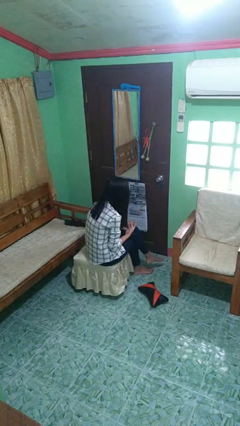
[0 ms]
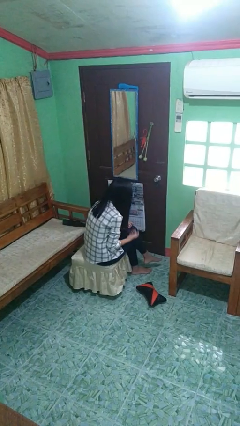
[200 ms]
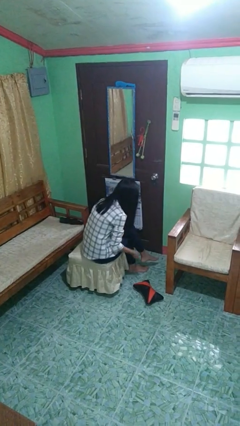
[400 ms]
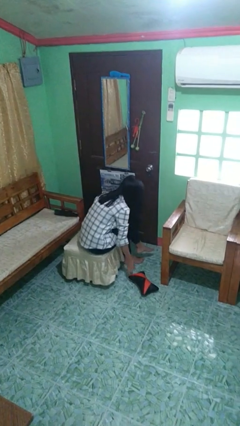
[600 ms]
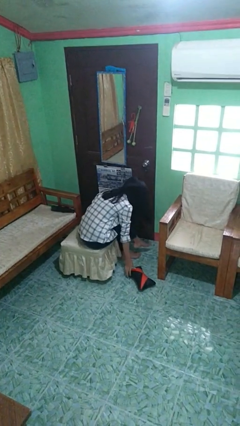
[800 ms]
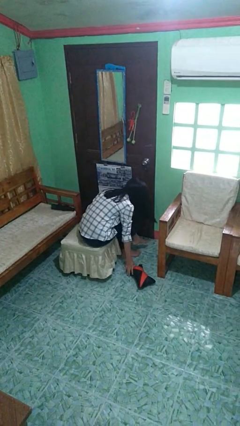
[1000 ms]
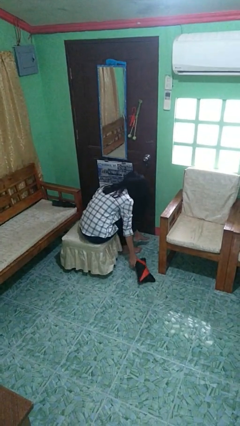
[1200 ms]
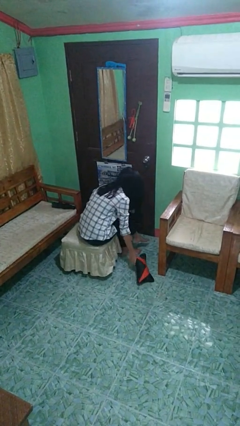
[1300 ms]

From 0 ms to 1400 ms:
person picks up object from floor

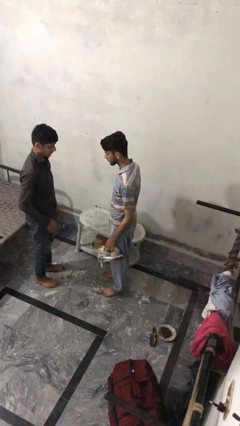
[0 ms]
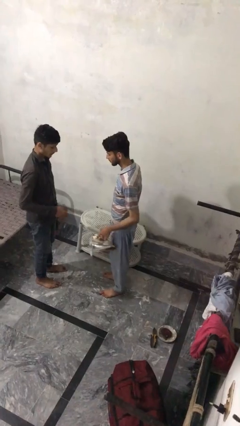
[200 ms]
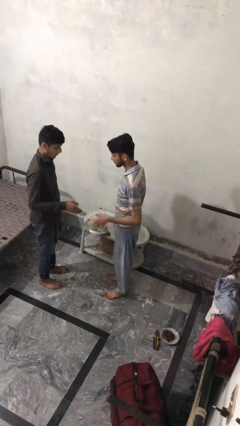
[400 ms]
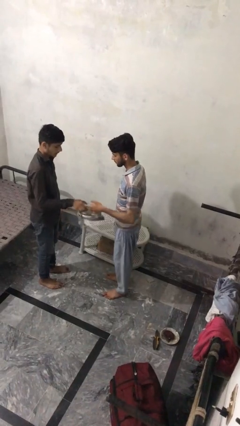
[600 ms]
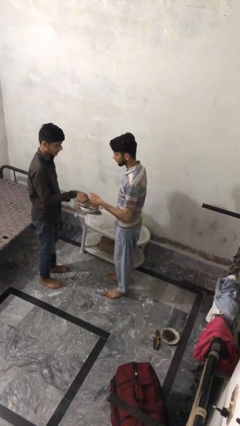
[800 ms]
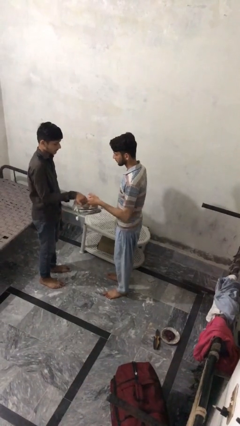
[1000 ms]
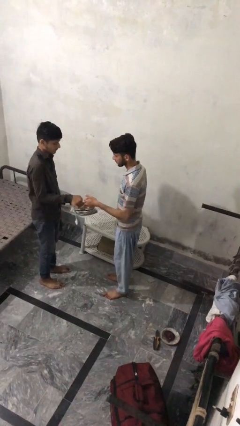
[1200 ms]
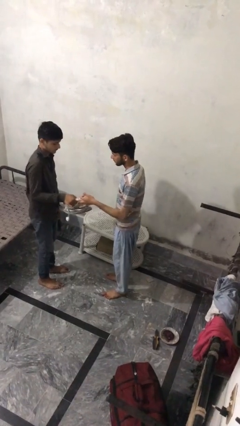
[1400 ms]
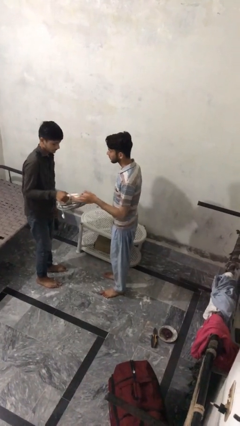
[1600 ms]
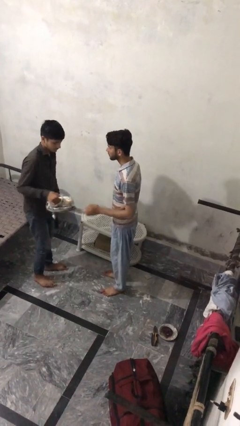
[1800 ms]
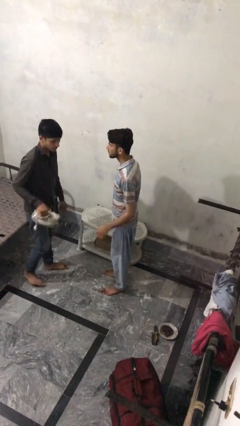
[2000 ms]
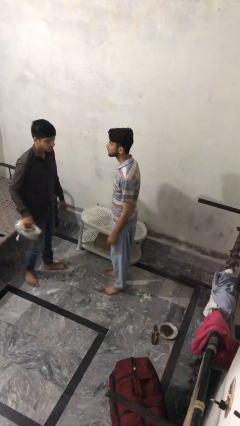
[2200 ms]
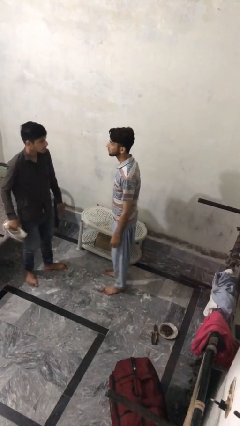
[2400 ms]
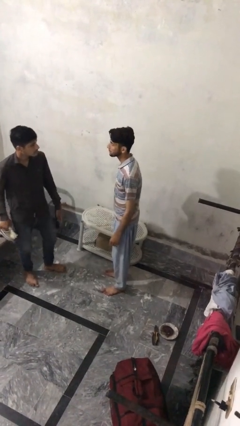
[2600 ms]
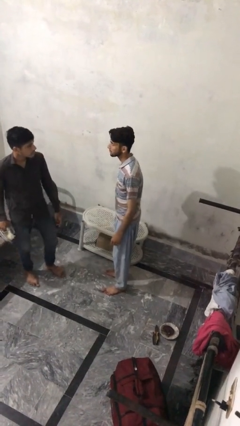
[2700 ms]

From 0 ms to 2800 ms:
person transfers object to person

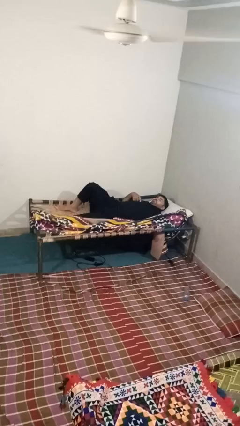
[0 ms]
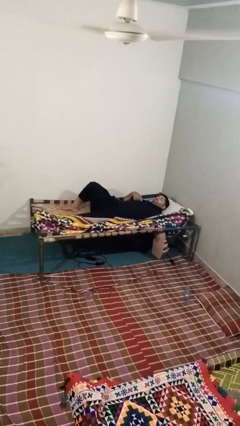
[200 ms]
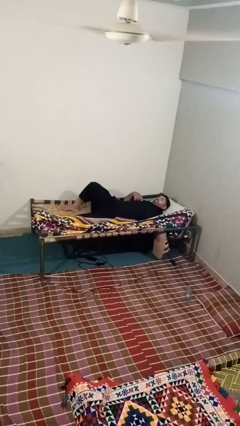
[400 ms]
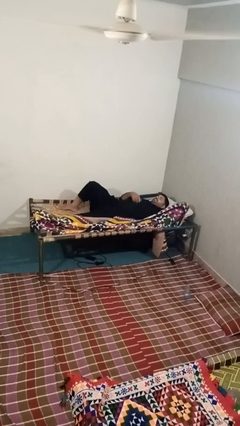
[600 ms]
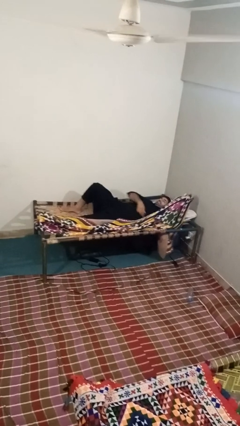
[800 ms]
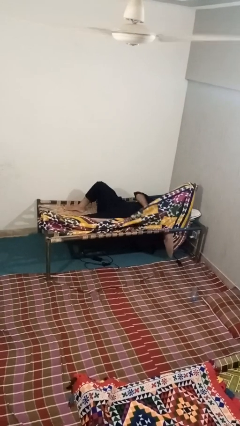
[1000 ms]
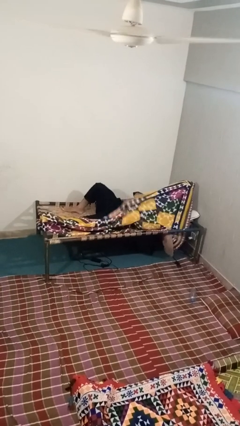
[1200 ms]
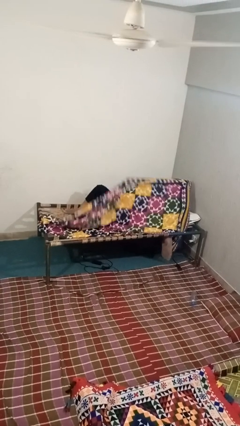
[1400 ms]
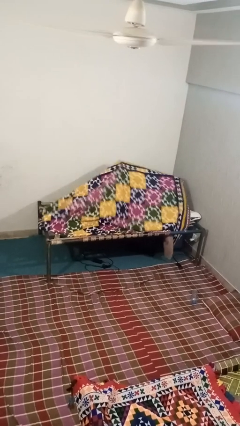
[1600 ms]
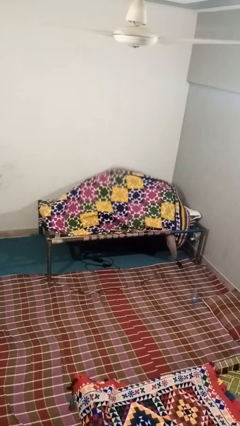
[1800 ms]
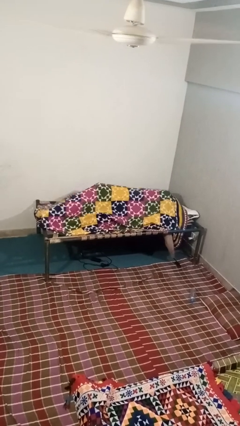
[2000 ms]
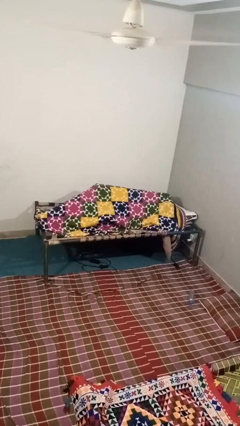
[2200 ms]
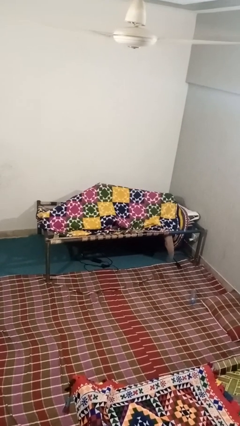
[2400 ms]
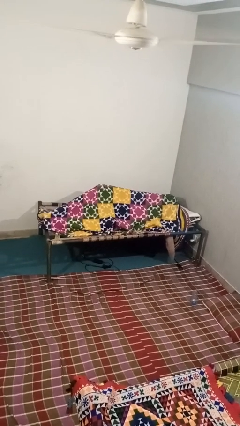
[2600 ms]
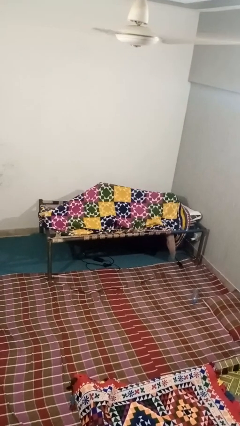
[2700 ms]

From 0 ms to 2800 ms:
person covers with blanket

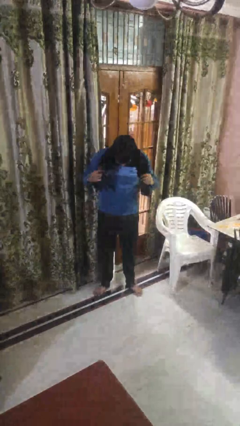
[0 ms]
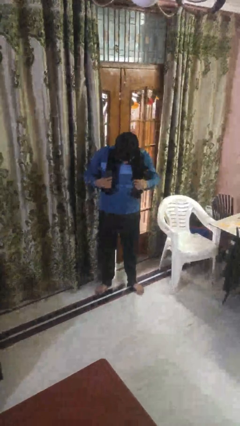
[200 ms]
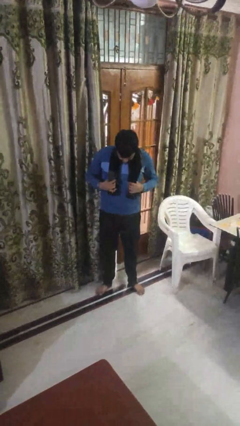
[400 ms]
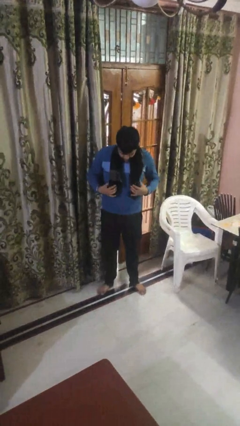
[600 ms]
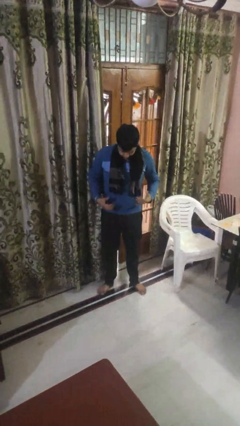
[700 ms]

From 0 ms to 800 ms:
person puts on scarf

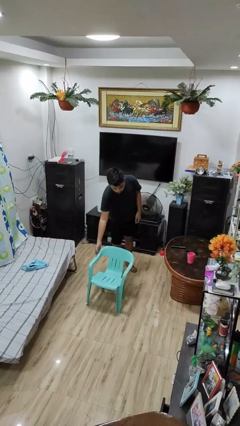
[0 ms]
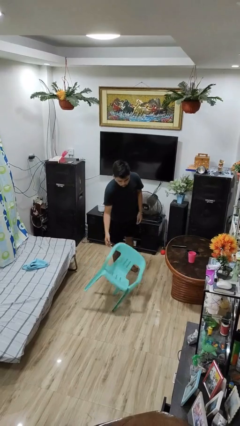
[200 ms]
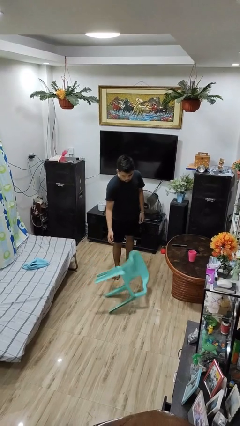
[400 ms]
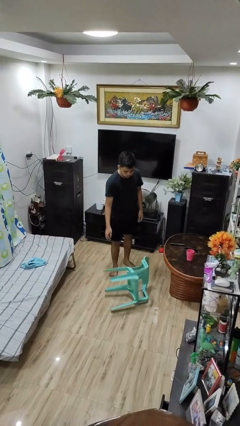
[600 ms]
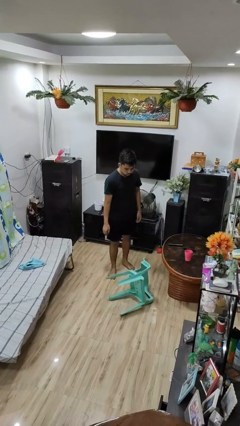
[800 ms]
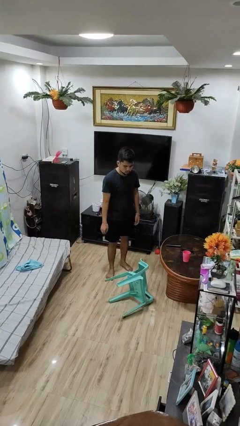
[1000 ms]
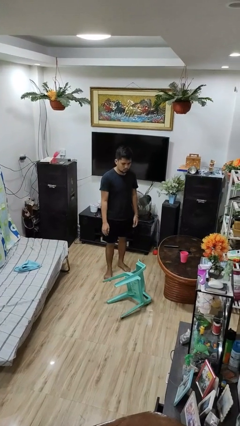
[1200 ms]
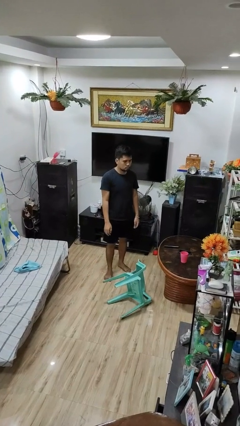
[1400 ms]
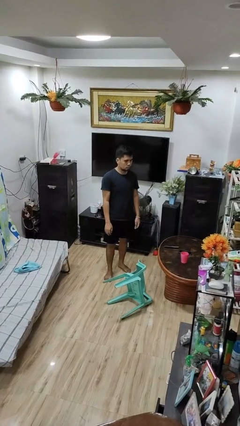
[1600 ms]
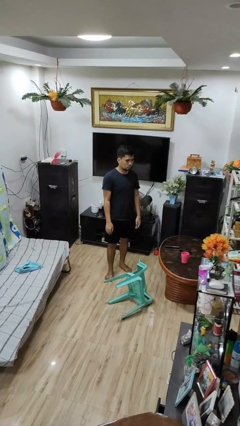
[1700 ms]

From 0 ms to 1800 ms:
person knocks over furniture

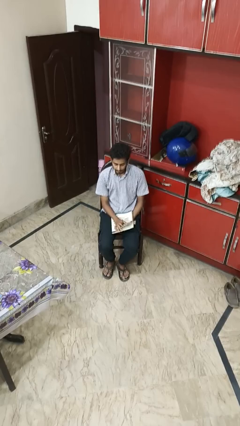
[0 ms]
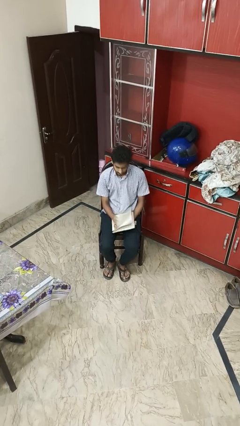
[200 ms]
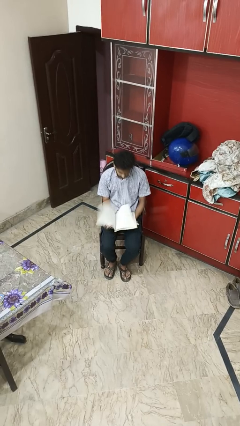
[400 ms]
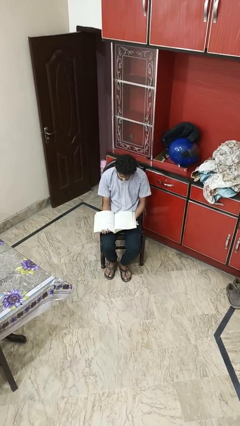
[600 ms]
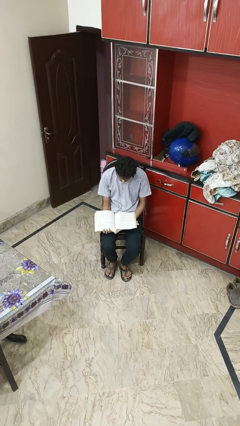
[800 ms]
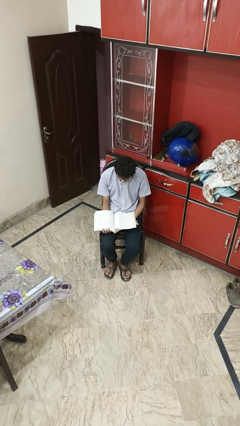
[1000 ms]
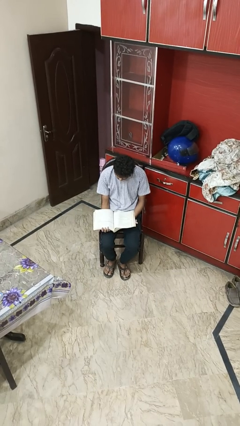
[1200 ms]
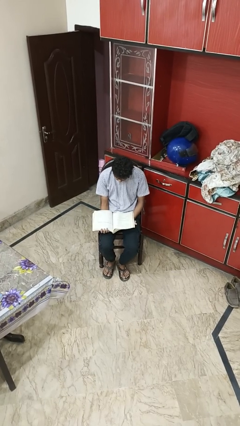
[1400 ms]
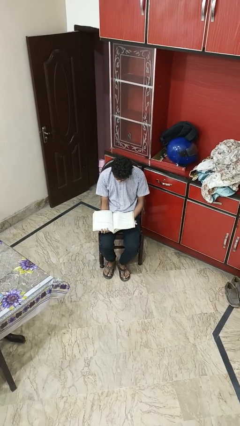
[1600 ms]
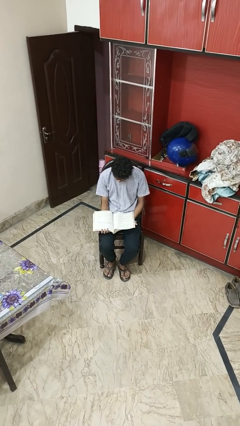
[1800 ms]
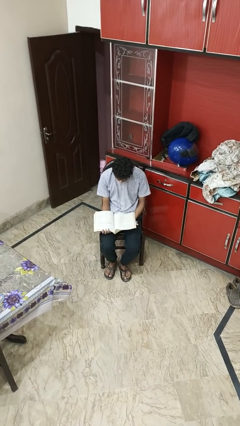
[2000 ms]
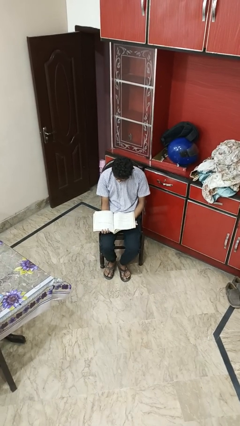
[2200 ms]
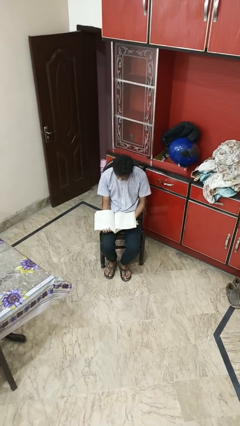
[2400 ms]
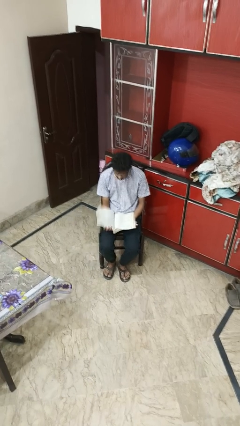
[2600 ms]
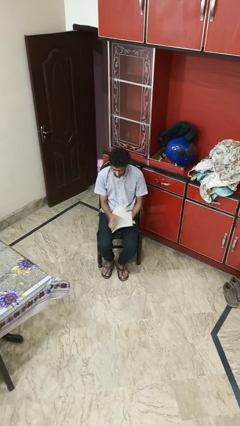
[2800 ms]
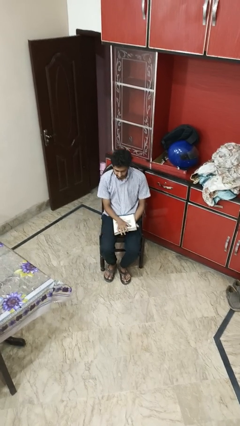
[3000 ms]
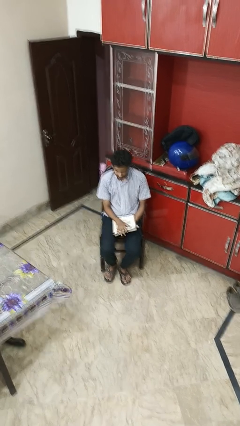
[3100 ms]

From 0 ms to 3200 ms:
person reads magazine

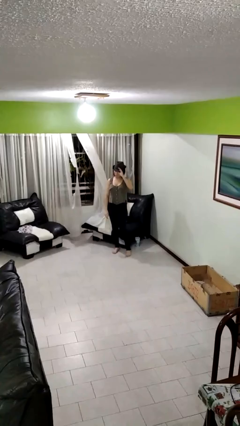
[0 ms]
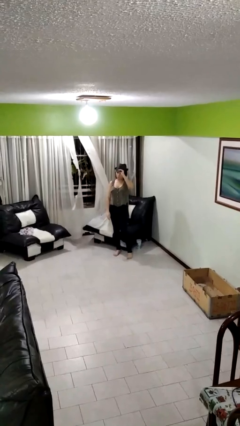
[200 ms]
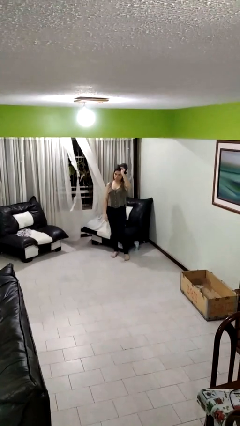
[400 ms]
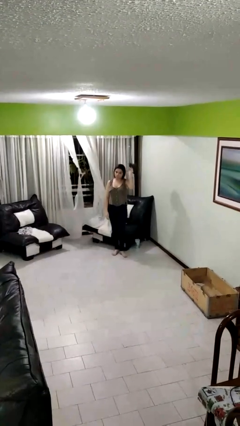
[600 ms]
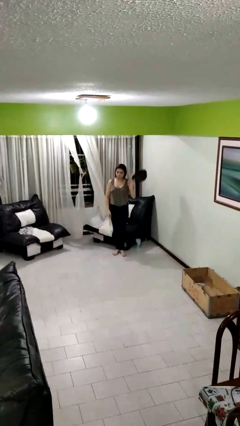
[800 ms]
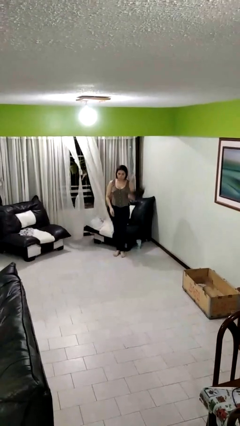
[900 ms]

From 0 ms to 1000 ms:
person takes off hat

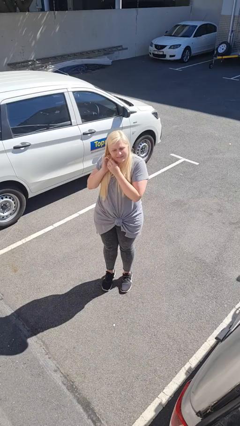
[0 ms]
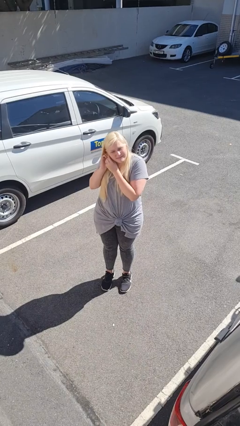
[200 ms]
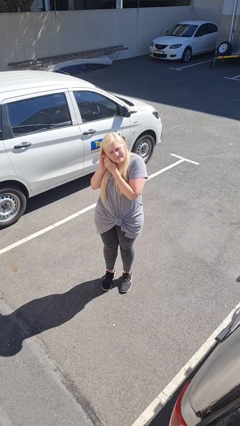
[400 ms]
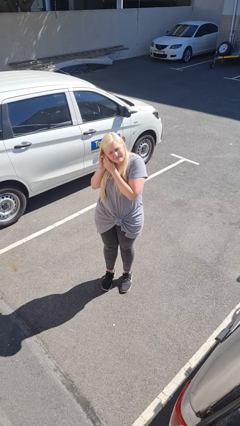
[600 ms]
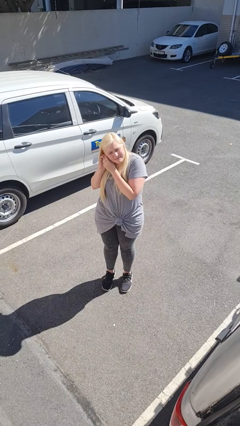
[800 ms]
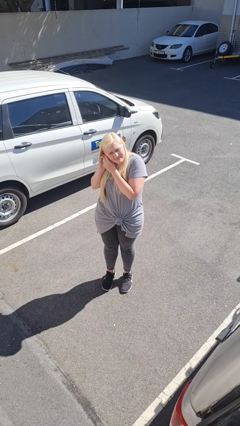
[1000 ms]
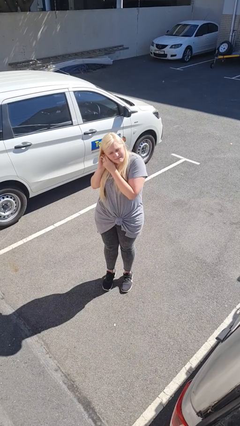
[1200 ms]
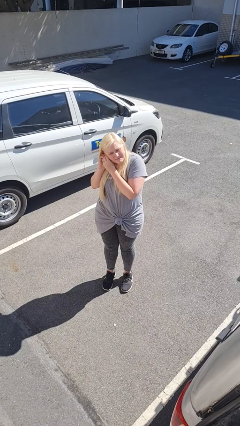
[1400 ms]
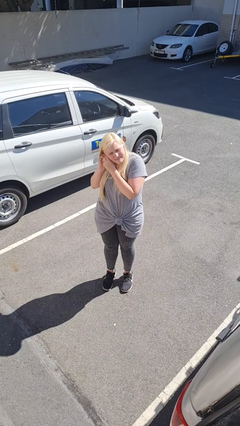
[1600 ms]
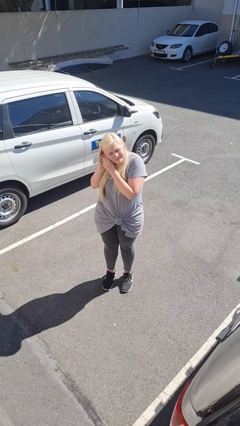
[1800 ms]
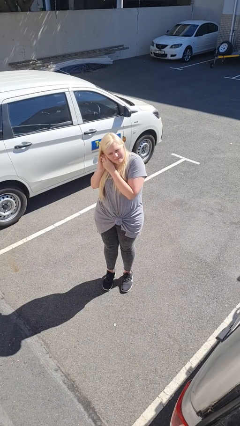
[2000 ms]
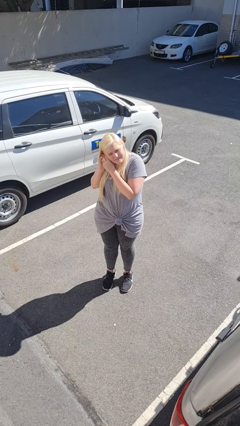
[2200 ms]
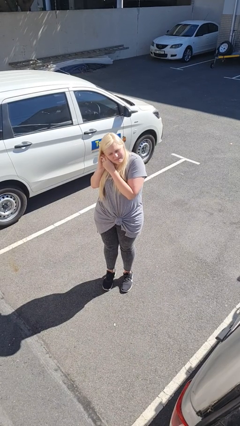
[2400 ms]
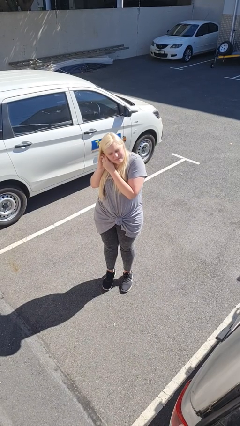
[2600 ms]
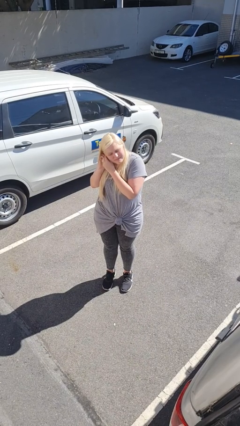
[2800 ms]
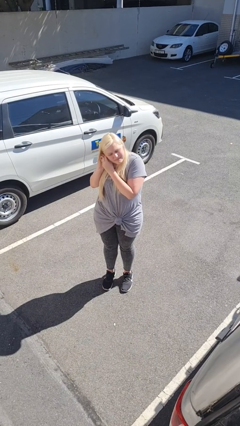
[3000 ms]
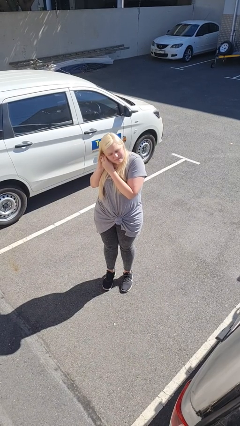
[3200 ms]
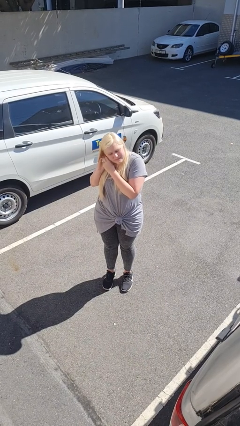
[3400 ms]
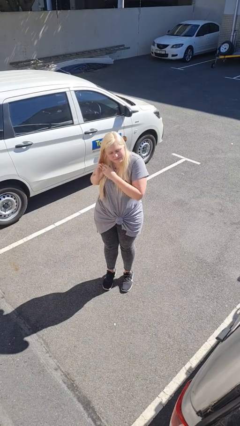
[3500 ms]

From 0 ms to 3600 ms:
person puts on earrings
